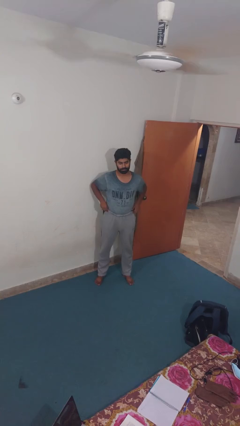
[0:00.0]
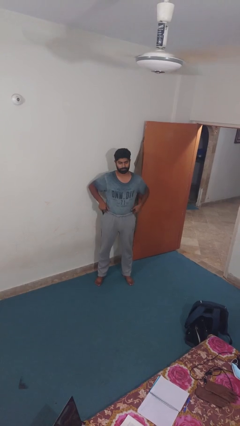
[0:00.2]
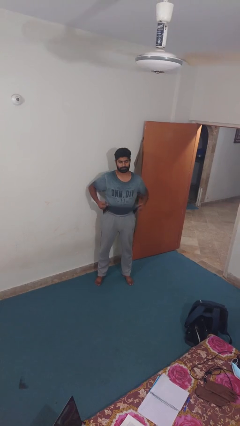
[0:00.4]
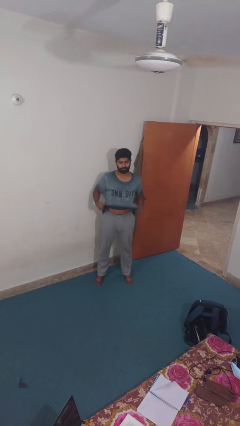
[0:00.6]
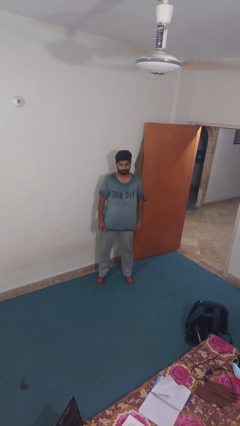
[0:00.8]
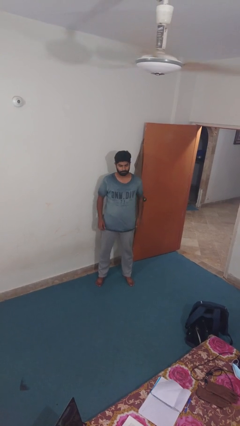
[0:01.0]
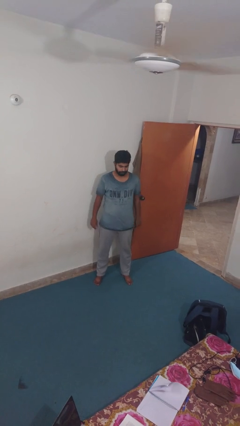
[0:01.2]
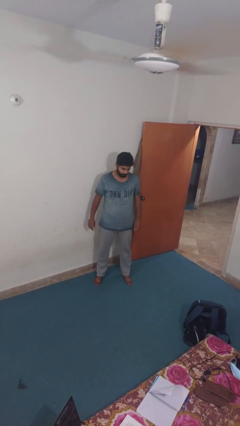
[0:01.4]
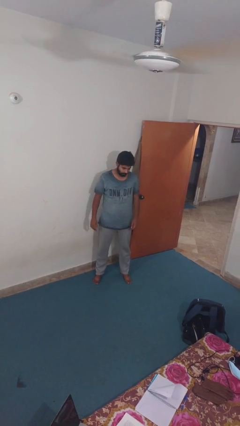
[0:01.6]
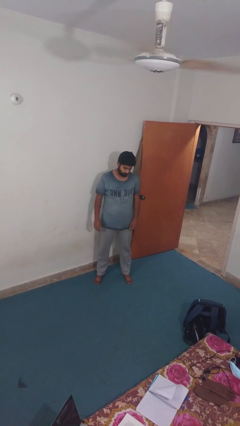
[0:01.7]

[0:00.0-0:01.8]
person untucks shirt

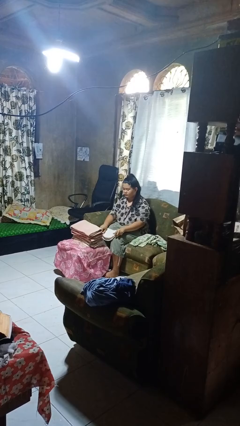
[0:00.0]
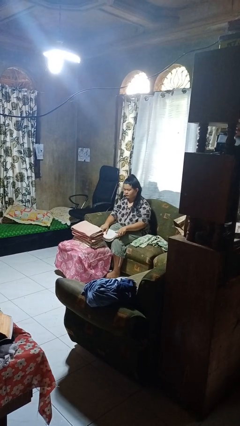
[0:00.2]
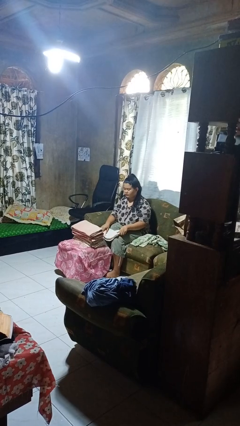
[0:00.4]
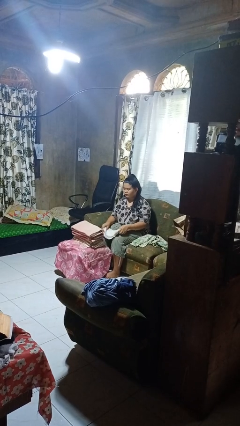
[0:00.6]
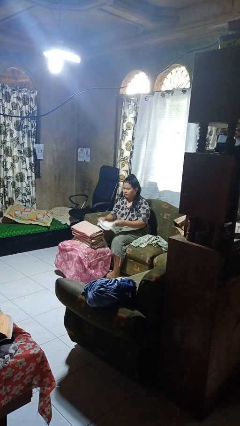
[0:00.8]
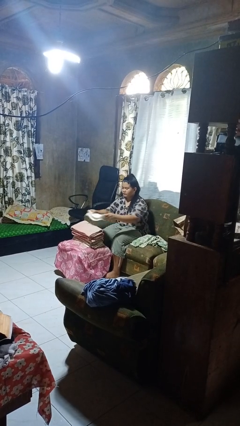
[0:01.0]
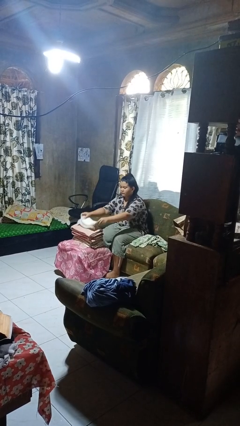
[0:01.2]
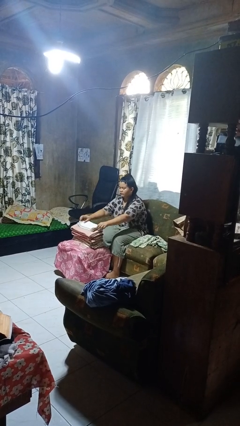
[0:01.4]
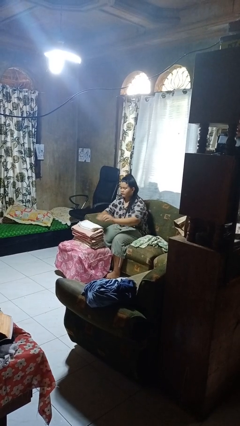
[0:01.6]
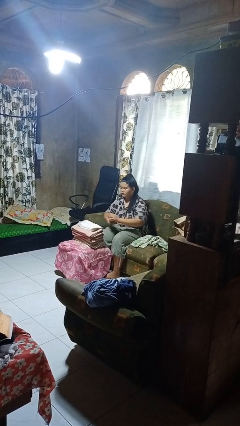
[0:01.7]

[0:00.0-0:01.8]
person folds towel

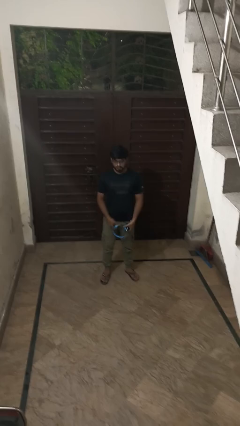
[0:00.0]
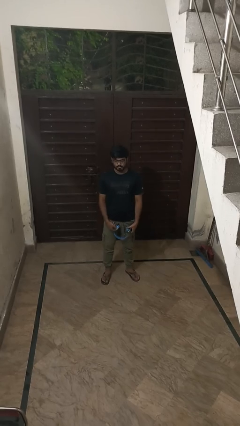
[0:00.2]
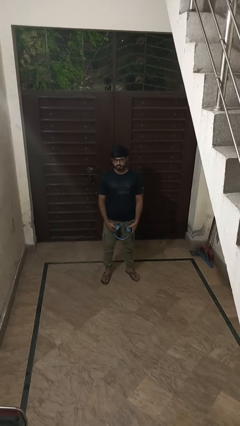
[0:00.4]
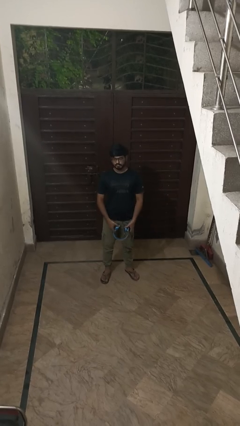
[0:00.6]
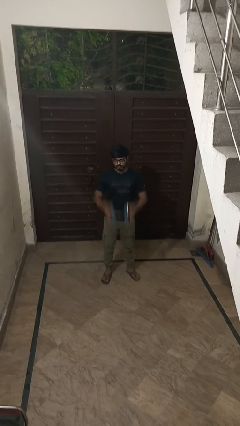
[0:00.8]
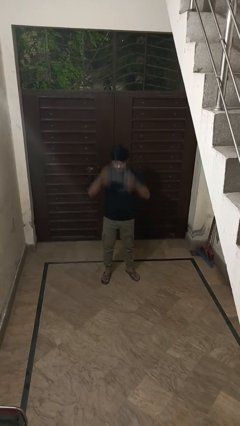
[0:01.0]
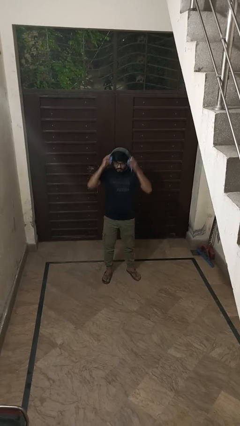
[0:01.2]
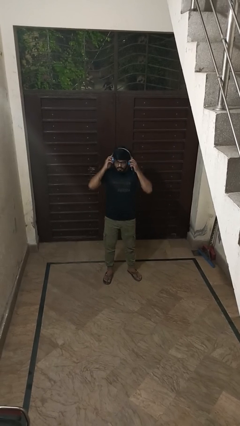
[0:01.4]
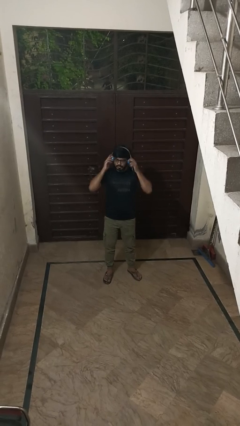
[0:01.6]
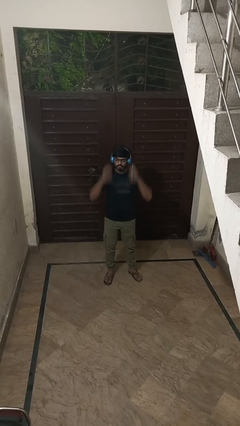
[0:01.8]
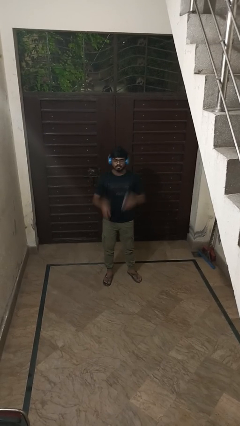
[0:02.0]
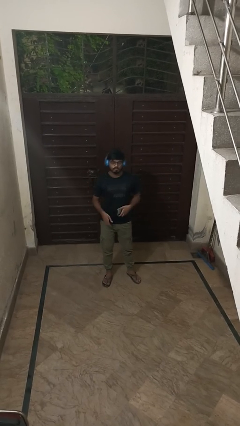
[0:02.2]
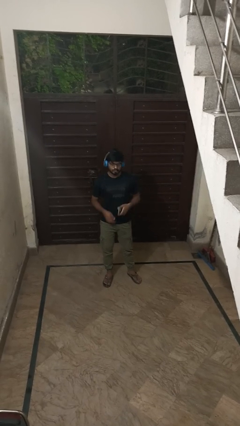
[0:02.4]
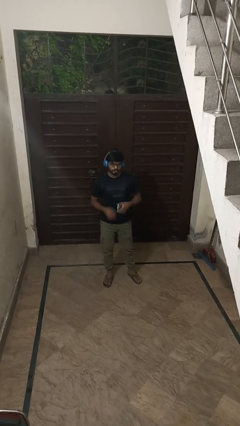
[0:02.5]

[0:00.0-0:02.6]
person puts on headphones

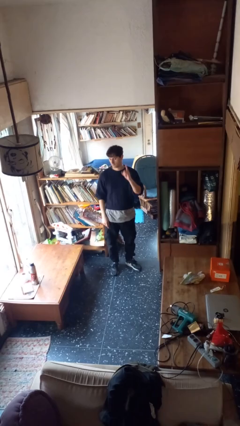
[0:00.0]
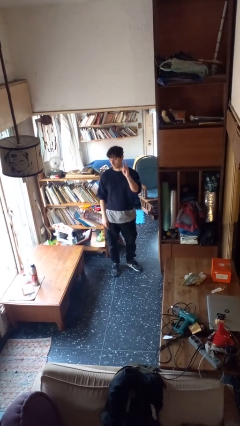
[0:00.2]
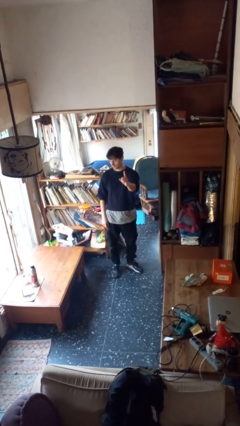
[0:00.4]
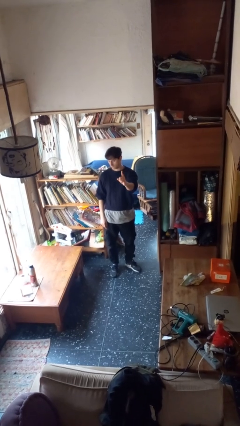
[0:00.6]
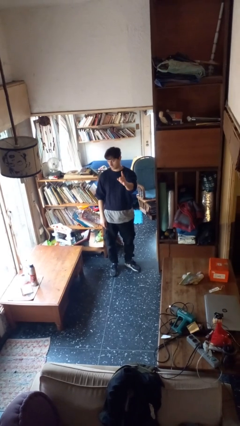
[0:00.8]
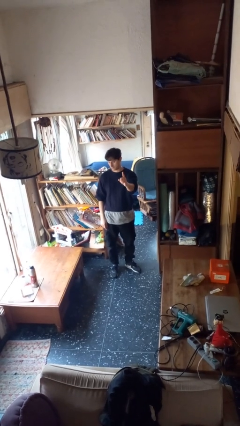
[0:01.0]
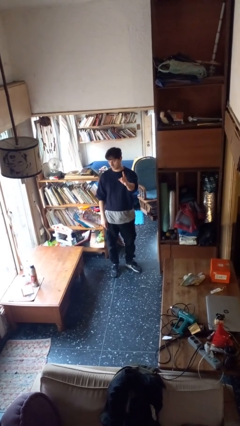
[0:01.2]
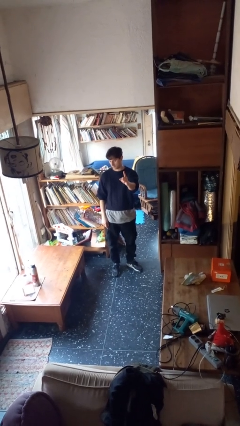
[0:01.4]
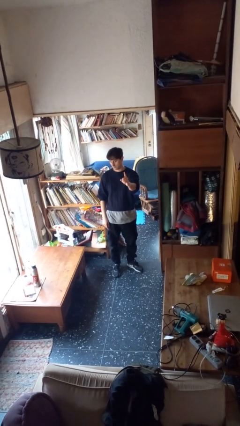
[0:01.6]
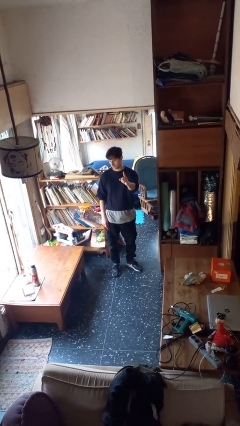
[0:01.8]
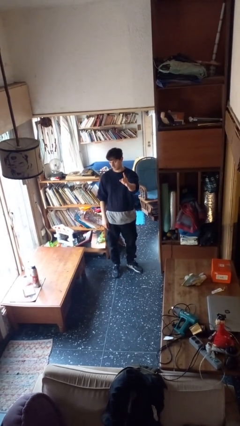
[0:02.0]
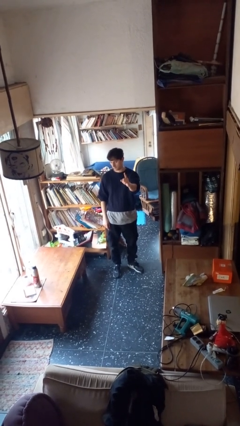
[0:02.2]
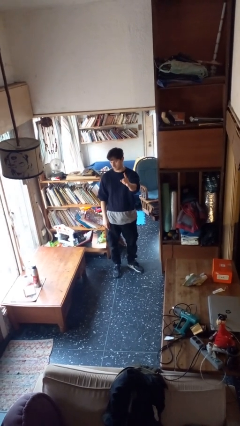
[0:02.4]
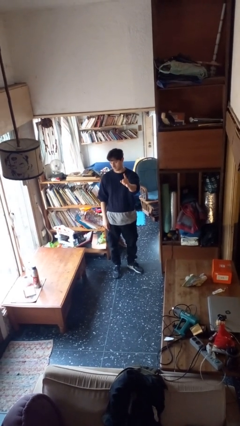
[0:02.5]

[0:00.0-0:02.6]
person gestures number one

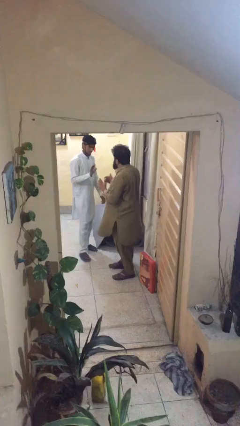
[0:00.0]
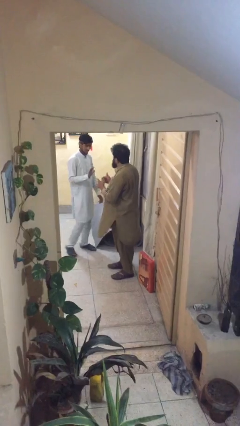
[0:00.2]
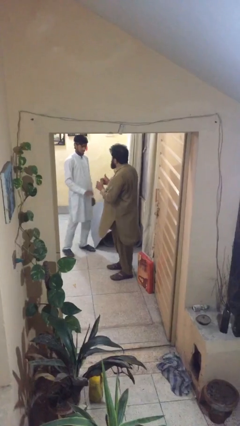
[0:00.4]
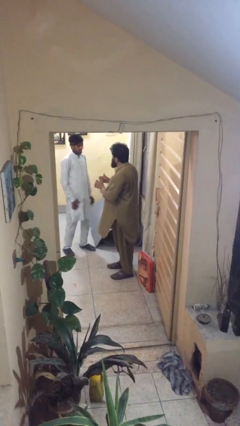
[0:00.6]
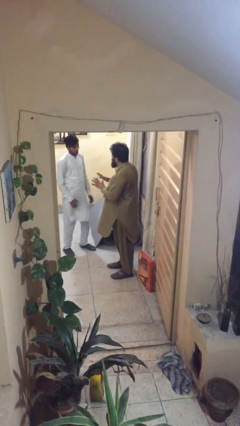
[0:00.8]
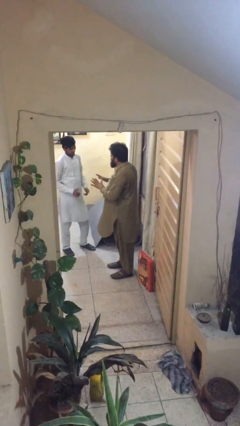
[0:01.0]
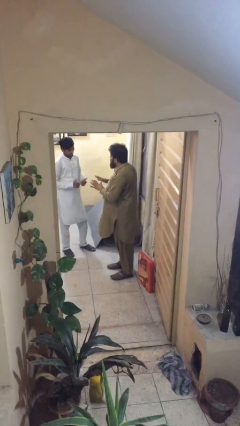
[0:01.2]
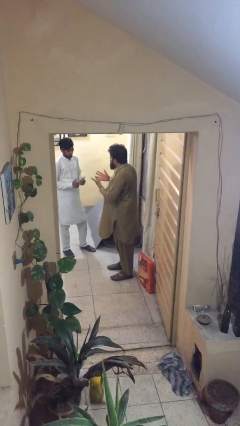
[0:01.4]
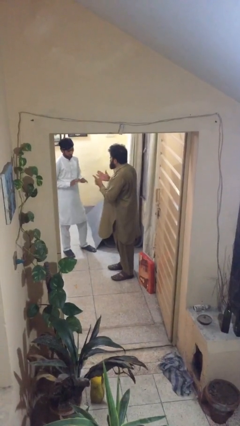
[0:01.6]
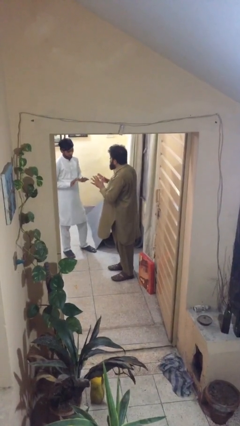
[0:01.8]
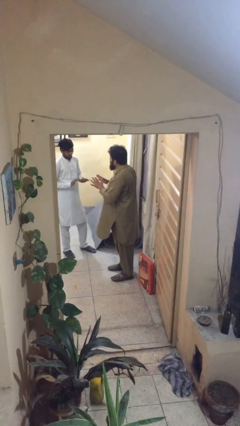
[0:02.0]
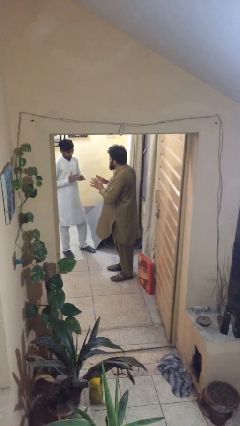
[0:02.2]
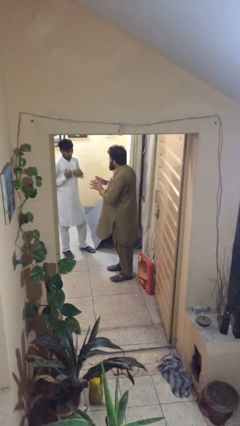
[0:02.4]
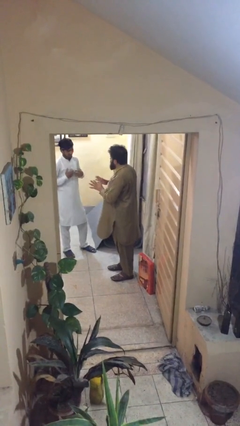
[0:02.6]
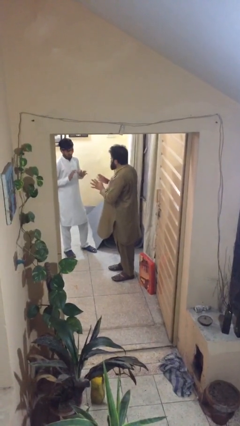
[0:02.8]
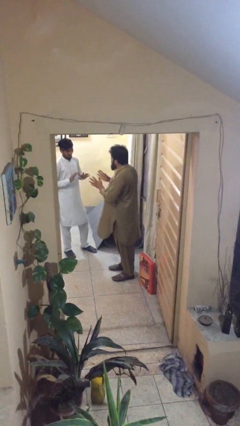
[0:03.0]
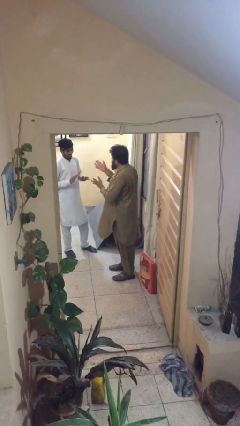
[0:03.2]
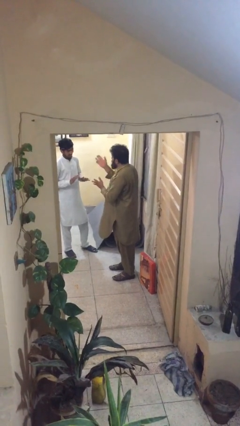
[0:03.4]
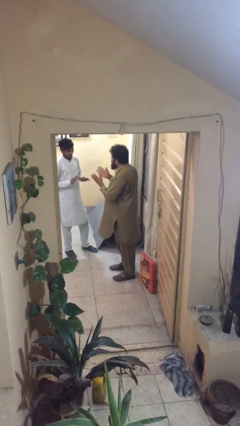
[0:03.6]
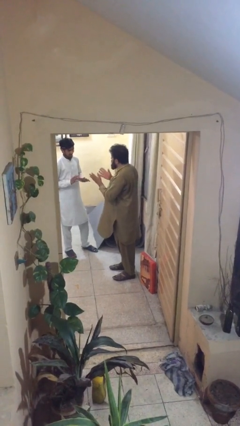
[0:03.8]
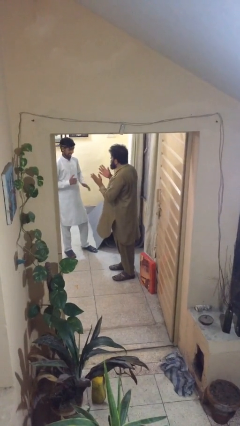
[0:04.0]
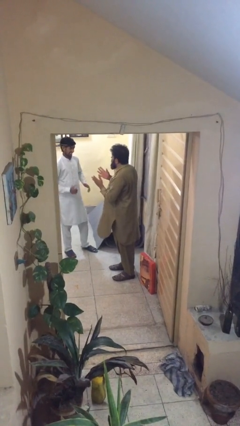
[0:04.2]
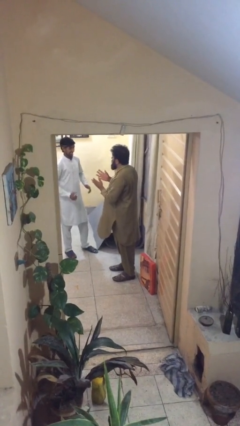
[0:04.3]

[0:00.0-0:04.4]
person talks to person

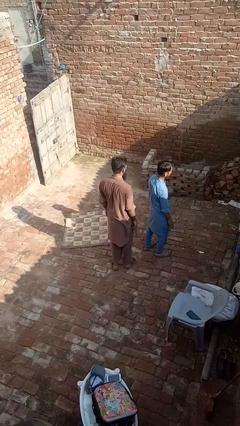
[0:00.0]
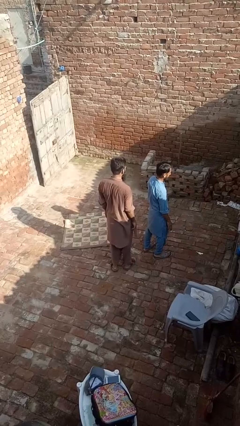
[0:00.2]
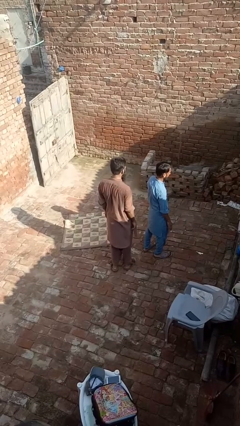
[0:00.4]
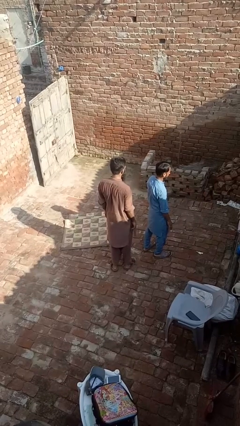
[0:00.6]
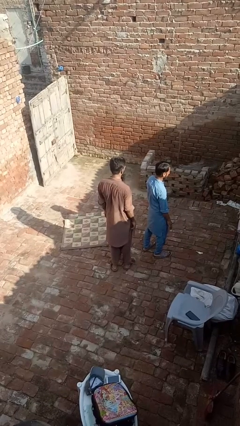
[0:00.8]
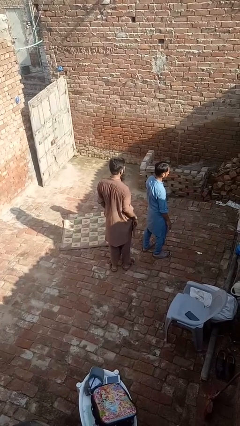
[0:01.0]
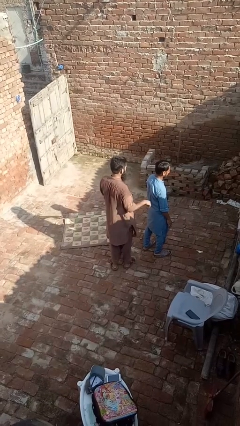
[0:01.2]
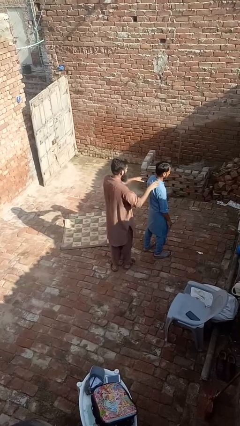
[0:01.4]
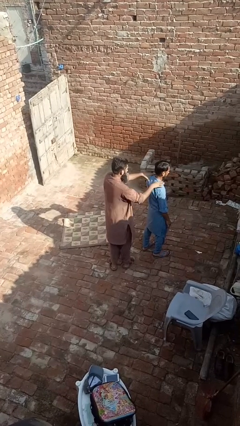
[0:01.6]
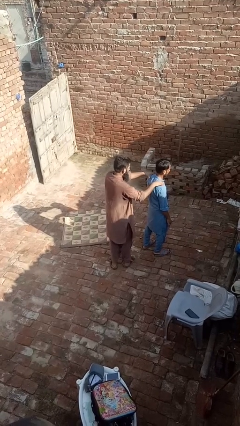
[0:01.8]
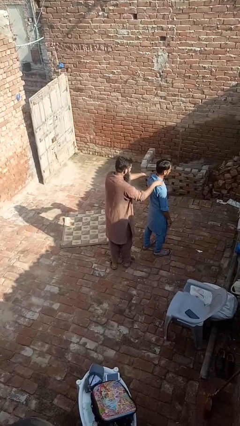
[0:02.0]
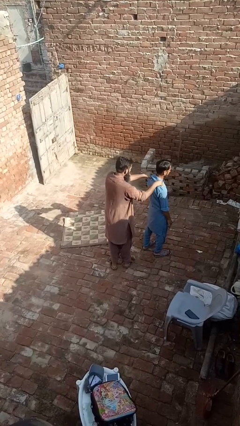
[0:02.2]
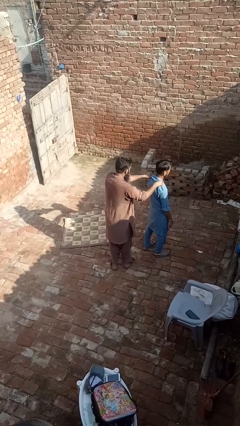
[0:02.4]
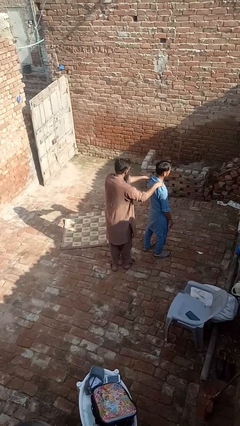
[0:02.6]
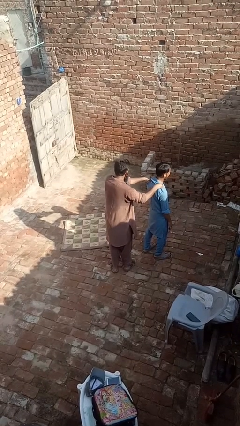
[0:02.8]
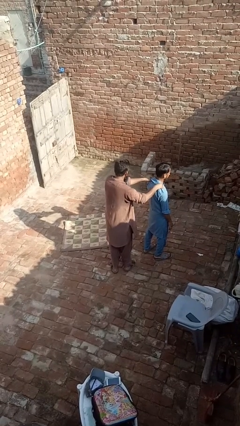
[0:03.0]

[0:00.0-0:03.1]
person grabs person by shoulder

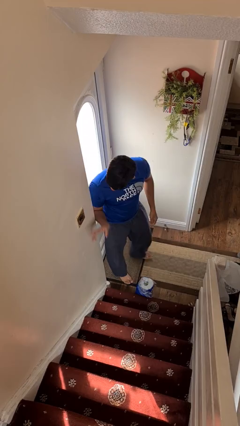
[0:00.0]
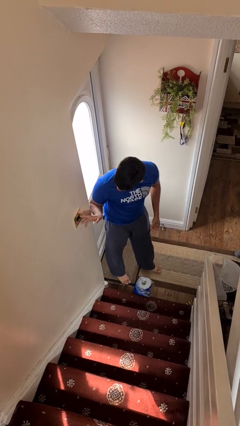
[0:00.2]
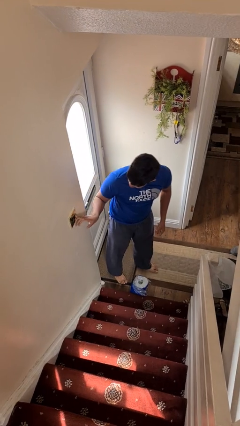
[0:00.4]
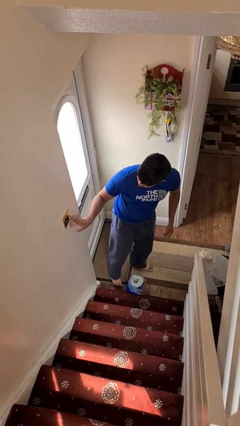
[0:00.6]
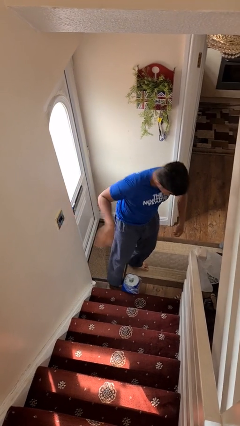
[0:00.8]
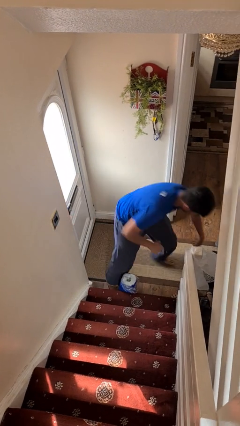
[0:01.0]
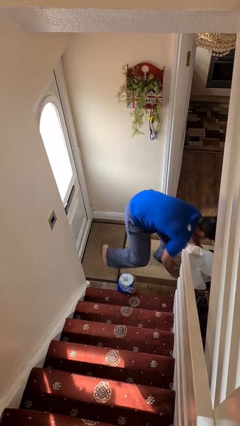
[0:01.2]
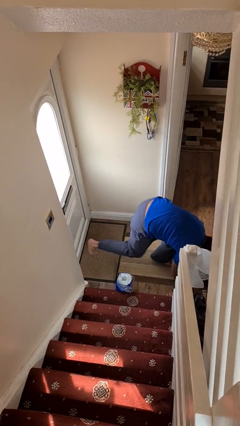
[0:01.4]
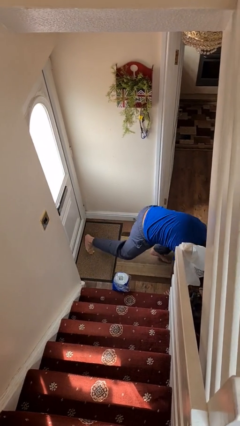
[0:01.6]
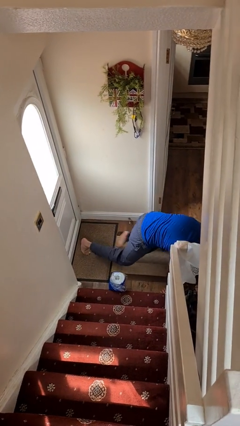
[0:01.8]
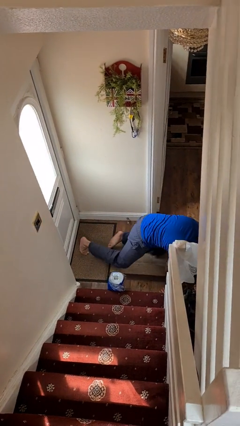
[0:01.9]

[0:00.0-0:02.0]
person trips on object on floor
